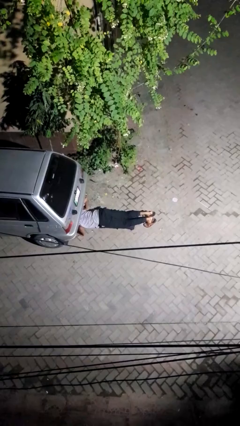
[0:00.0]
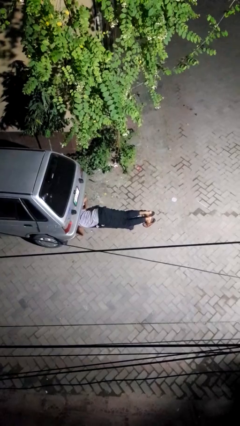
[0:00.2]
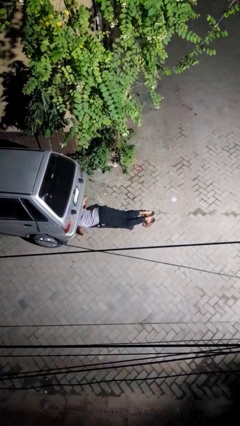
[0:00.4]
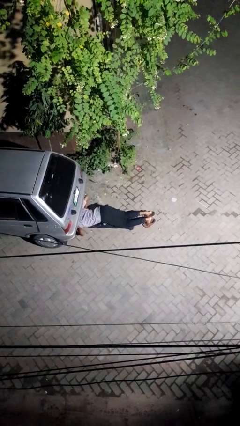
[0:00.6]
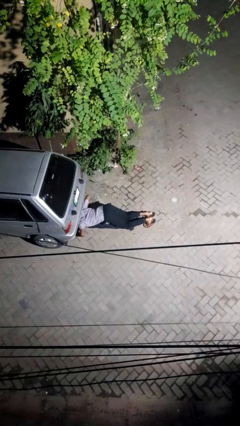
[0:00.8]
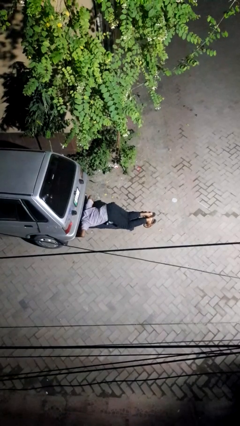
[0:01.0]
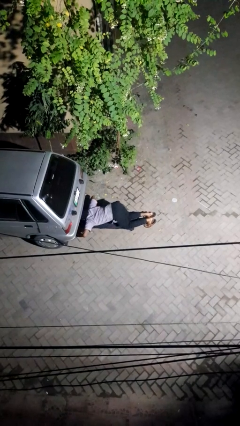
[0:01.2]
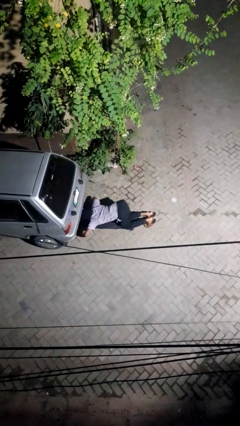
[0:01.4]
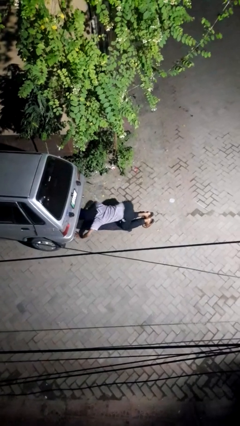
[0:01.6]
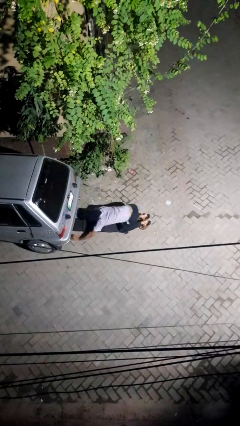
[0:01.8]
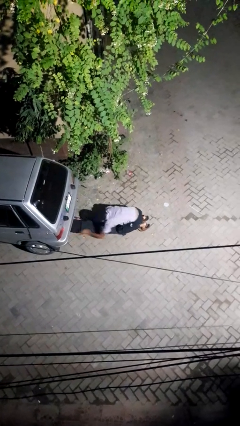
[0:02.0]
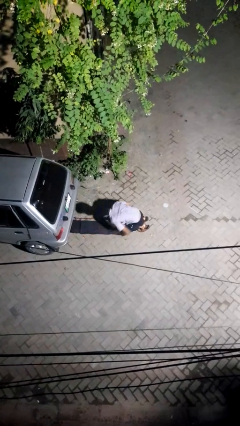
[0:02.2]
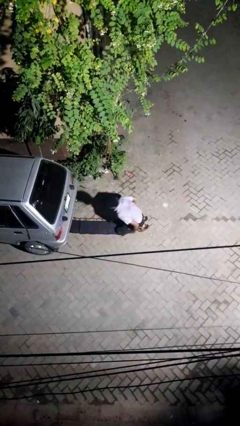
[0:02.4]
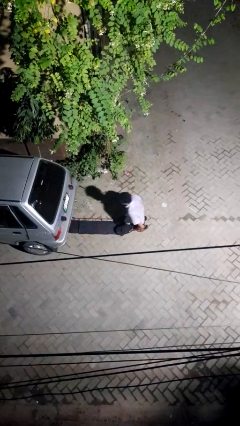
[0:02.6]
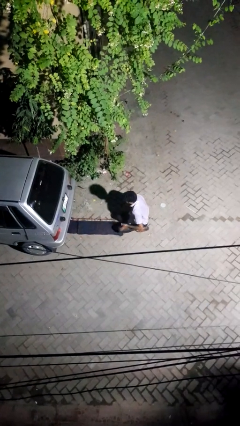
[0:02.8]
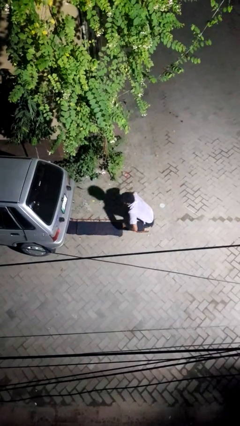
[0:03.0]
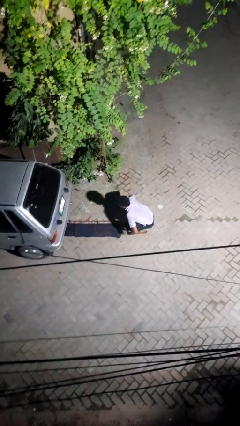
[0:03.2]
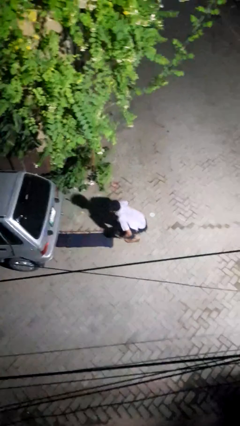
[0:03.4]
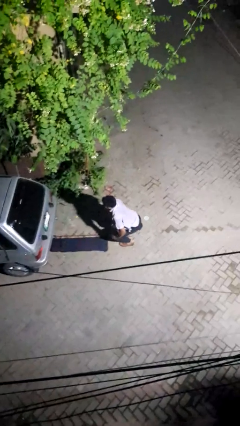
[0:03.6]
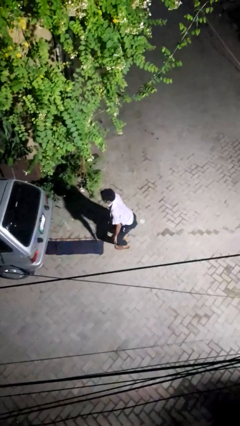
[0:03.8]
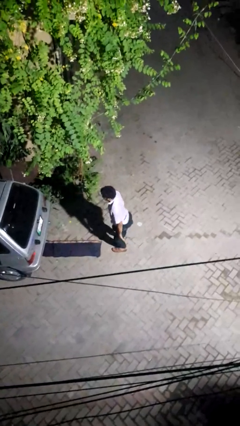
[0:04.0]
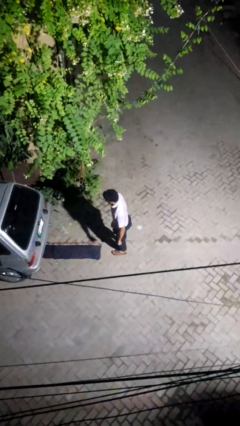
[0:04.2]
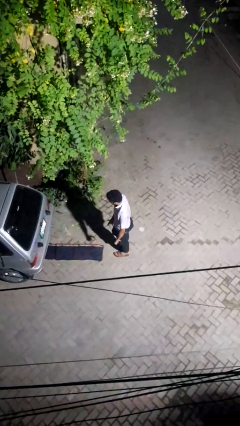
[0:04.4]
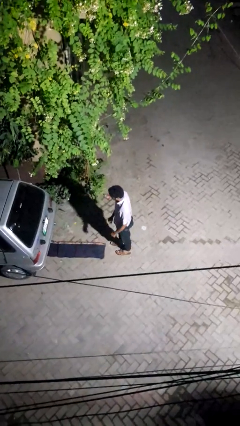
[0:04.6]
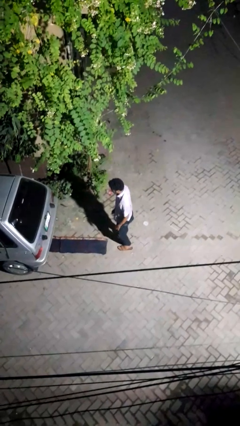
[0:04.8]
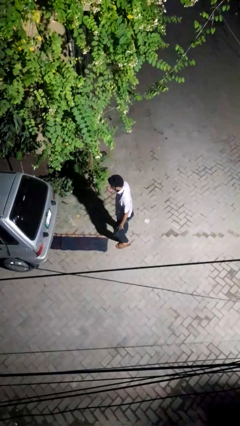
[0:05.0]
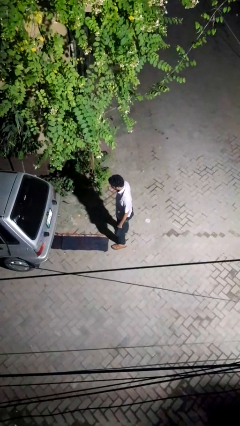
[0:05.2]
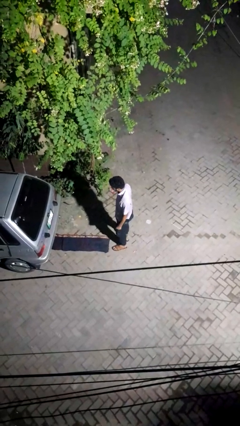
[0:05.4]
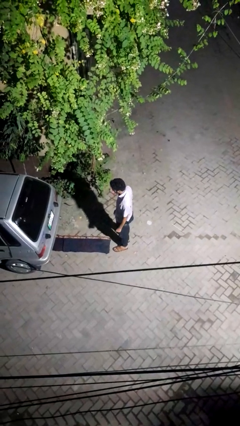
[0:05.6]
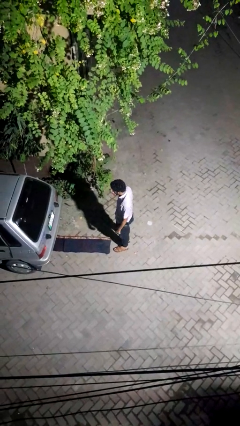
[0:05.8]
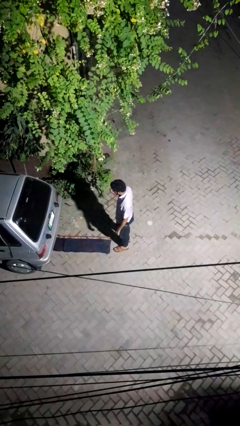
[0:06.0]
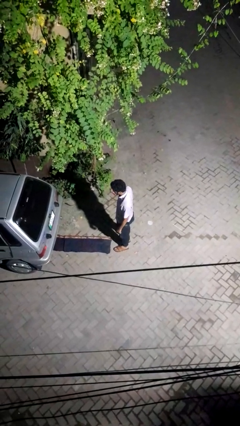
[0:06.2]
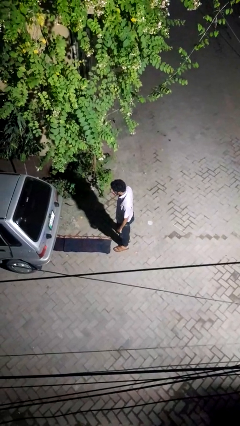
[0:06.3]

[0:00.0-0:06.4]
person crawls out from under vehicle

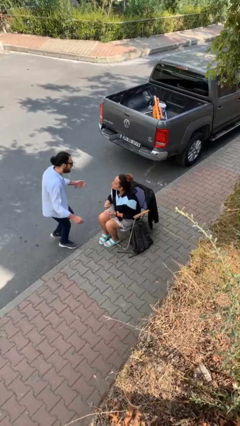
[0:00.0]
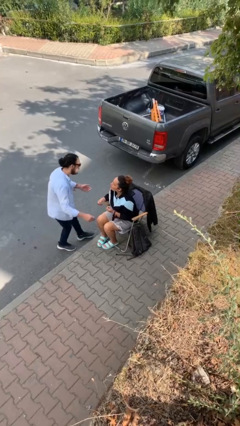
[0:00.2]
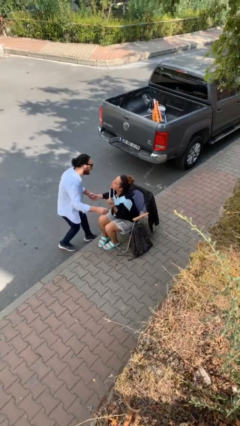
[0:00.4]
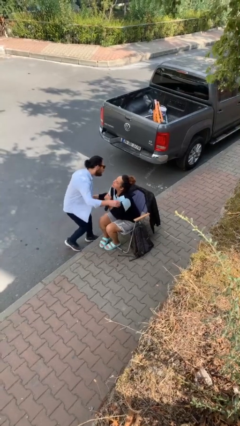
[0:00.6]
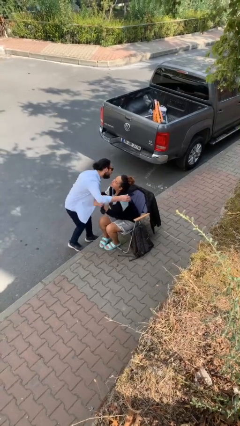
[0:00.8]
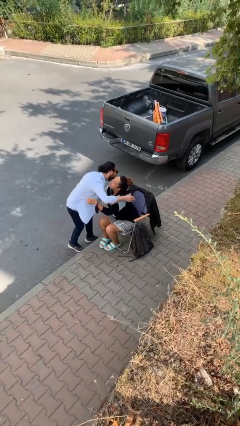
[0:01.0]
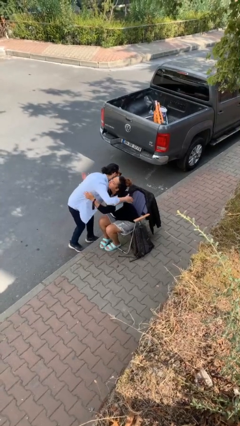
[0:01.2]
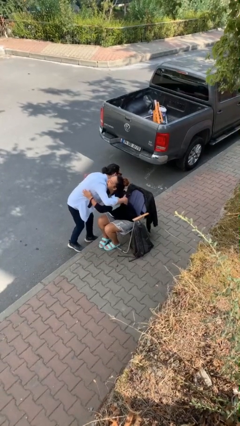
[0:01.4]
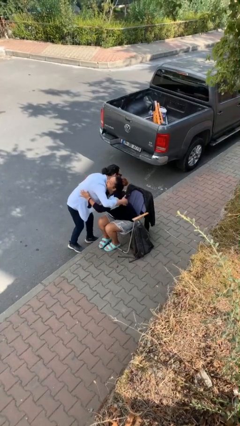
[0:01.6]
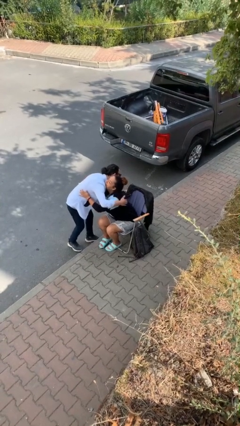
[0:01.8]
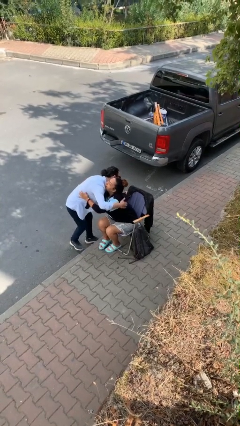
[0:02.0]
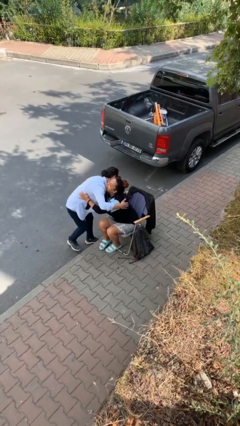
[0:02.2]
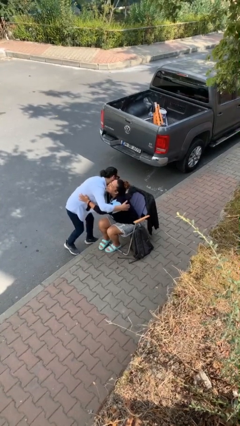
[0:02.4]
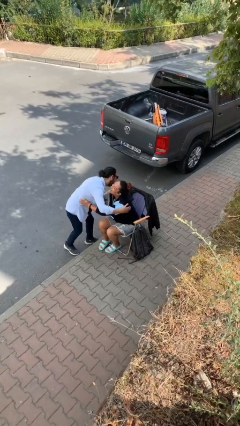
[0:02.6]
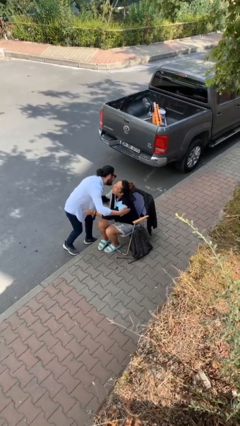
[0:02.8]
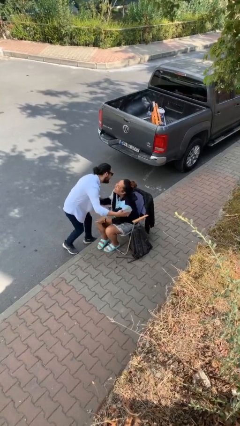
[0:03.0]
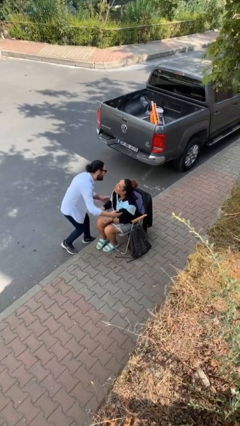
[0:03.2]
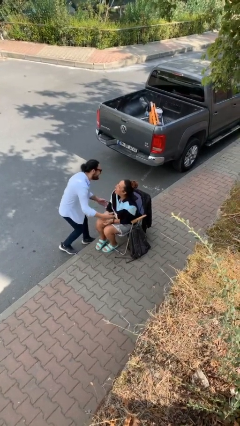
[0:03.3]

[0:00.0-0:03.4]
person embraces person

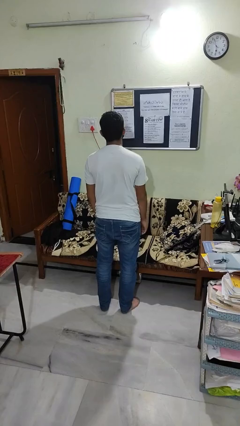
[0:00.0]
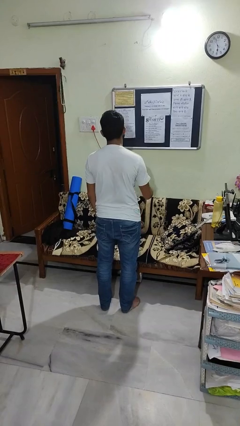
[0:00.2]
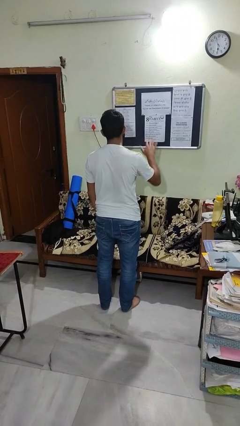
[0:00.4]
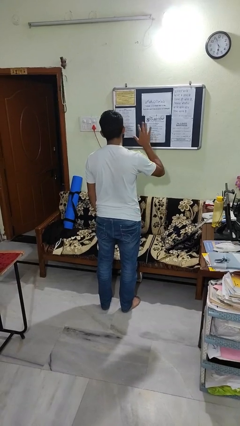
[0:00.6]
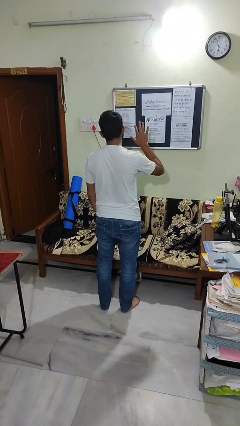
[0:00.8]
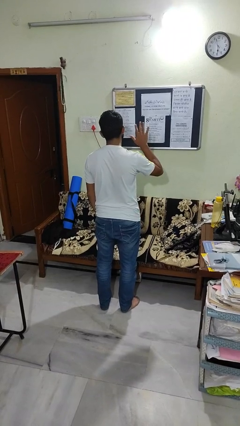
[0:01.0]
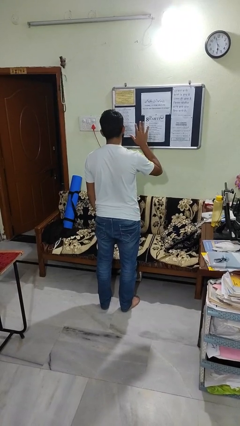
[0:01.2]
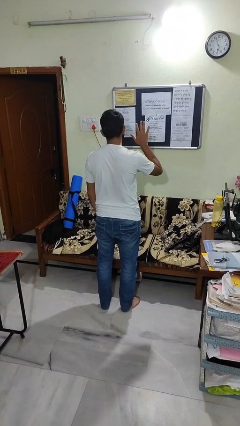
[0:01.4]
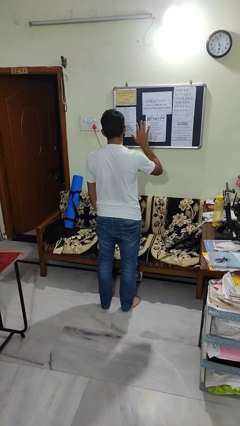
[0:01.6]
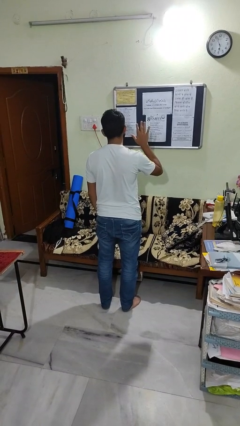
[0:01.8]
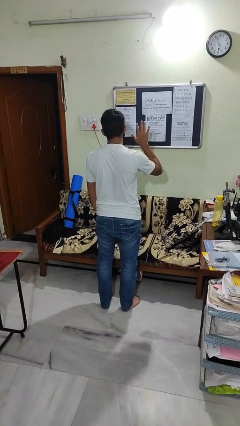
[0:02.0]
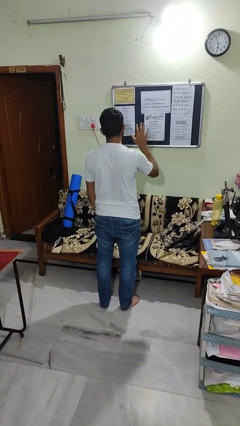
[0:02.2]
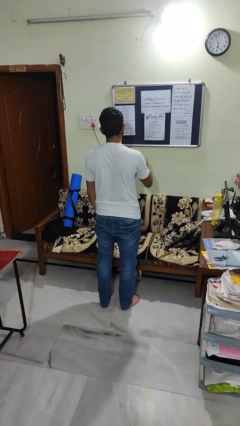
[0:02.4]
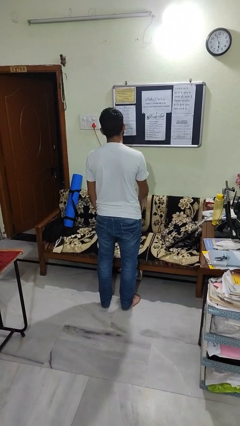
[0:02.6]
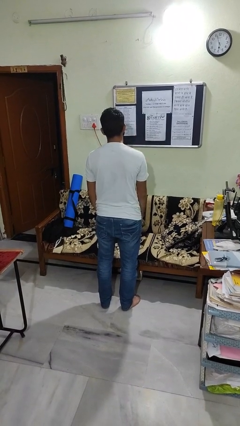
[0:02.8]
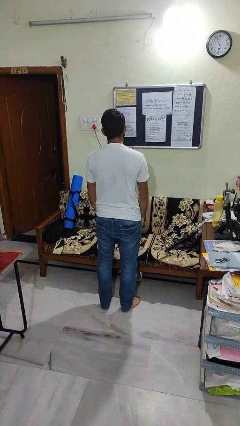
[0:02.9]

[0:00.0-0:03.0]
person gestures number five

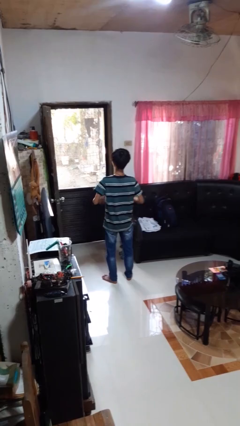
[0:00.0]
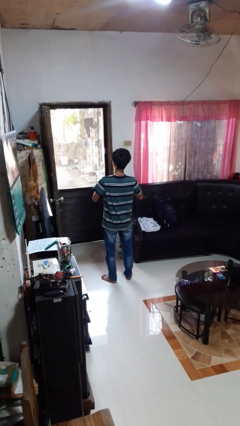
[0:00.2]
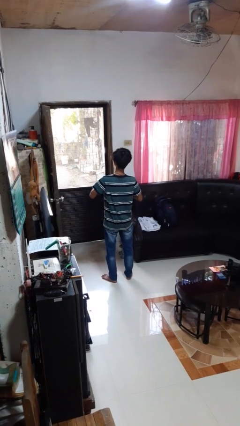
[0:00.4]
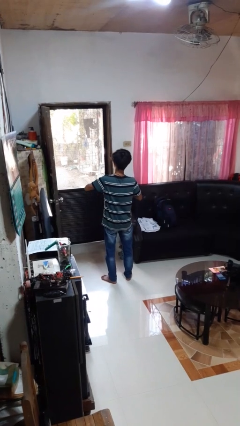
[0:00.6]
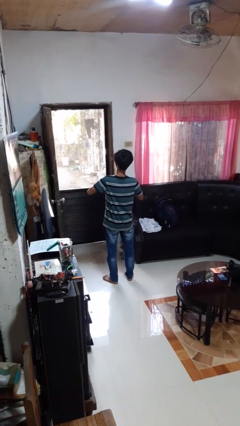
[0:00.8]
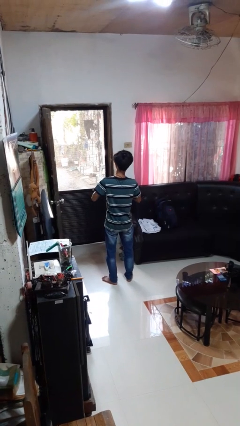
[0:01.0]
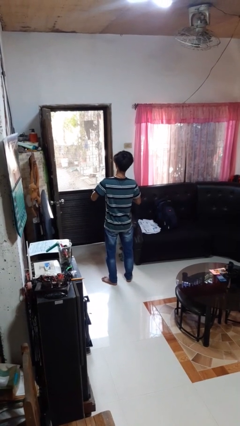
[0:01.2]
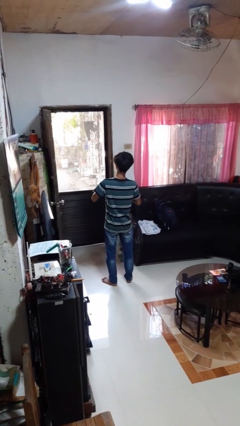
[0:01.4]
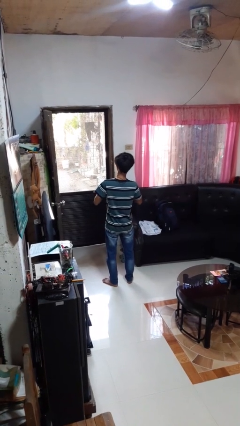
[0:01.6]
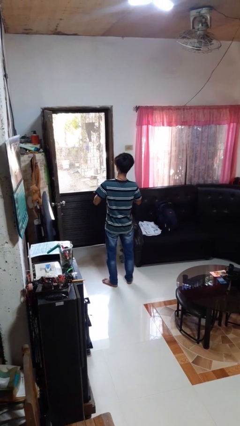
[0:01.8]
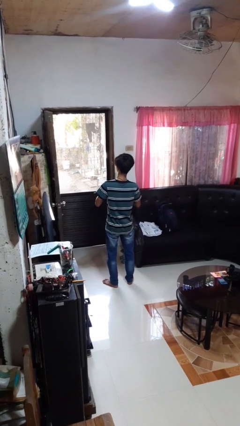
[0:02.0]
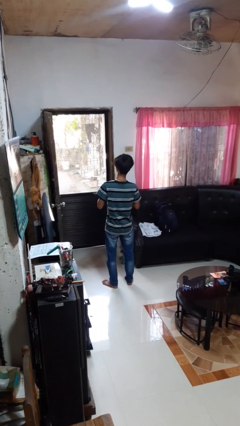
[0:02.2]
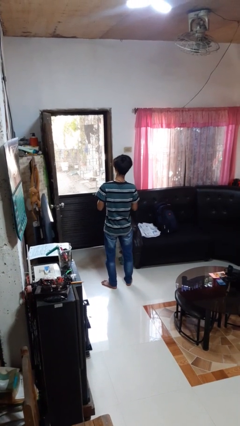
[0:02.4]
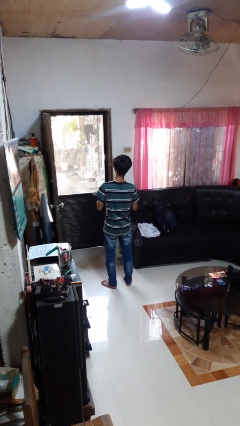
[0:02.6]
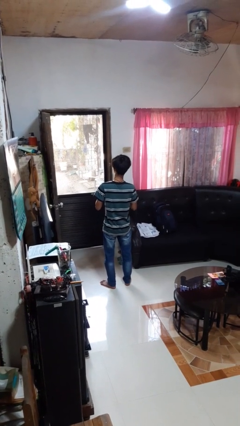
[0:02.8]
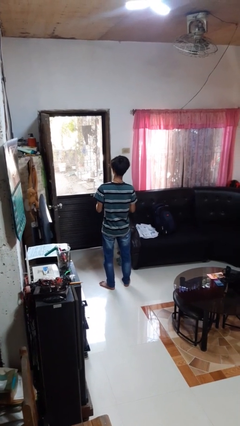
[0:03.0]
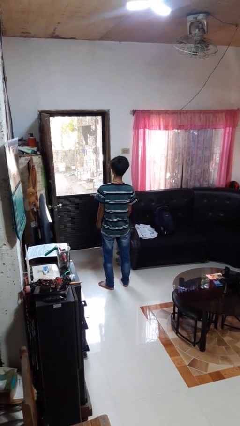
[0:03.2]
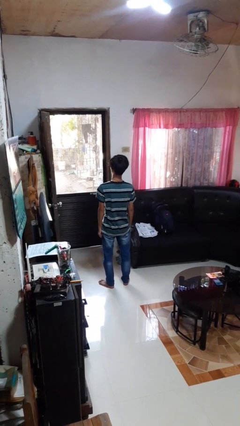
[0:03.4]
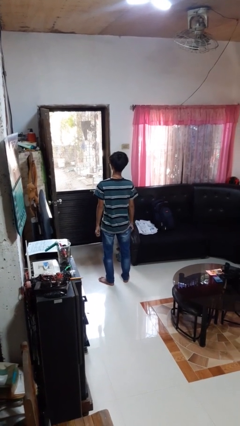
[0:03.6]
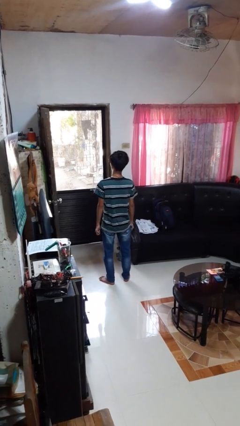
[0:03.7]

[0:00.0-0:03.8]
person buttons shirt

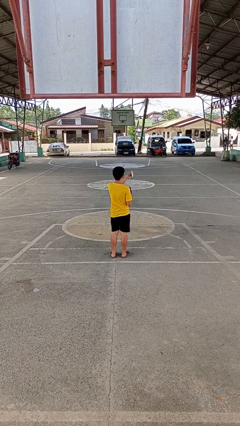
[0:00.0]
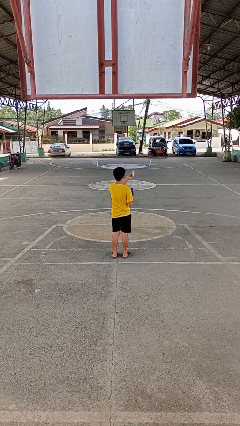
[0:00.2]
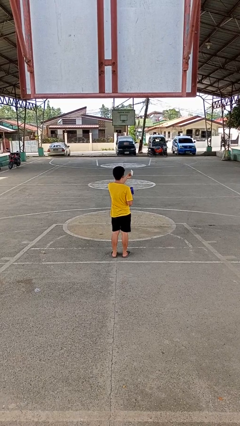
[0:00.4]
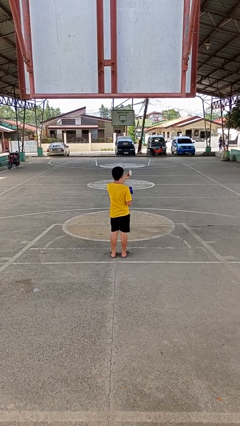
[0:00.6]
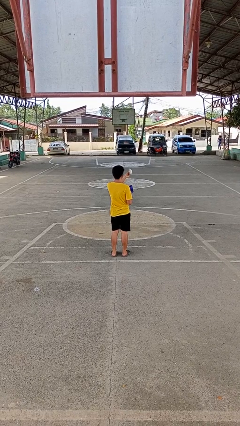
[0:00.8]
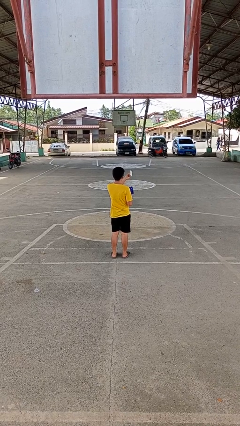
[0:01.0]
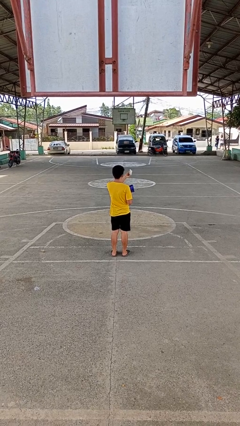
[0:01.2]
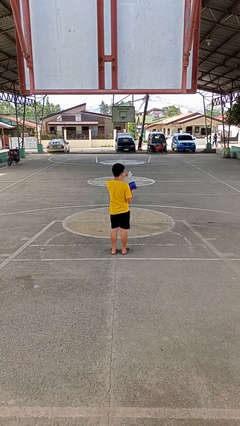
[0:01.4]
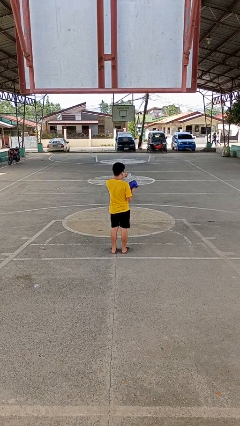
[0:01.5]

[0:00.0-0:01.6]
person takes object from purse
